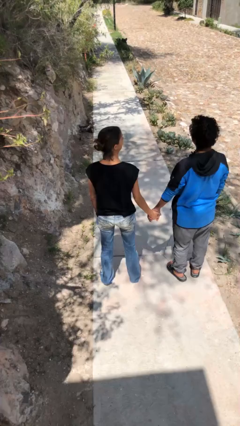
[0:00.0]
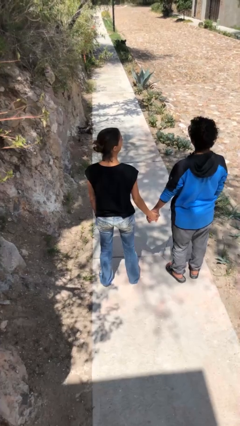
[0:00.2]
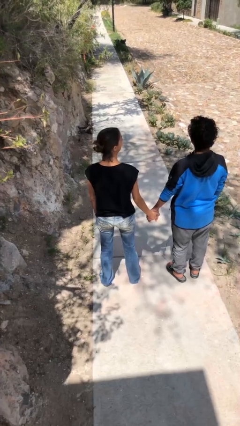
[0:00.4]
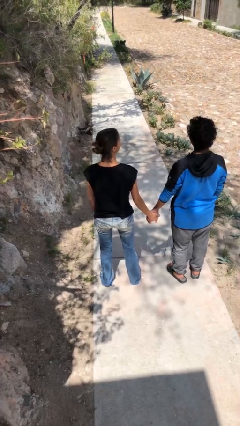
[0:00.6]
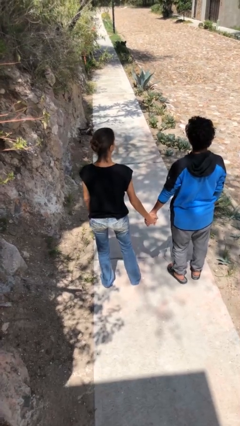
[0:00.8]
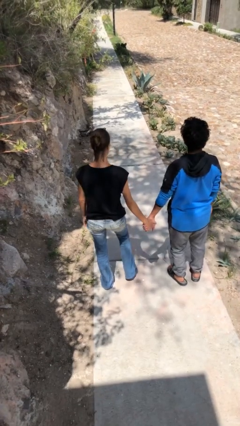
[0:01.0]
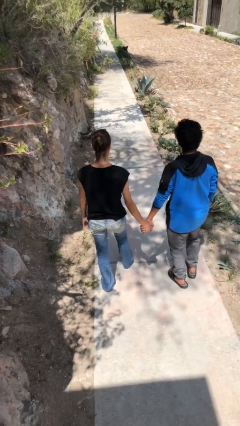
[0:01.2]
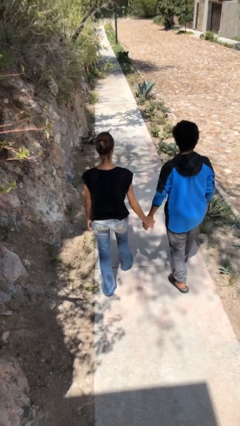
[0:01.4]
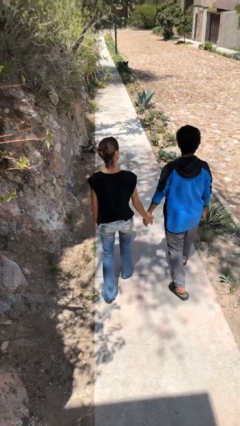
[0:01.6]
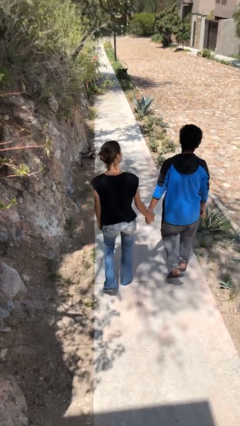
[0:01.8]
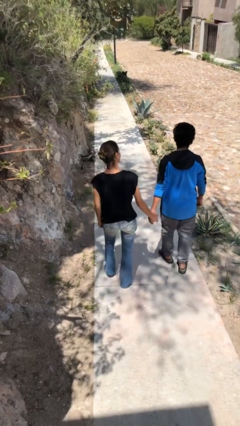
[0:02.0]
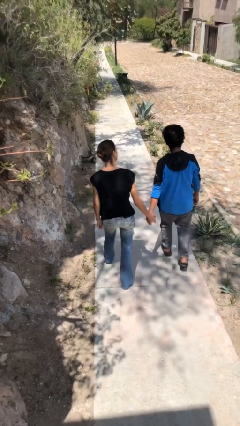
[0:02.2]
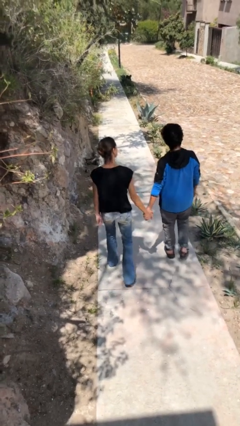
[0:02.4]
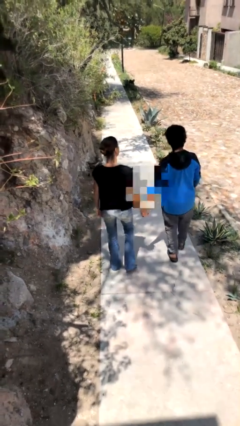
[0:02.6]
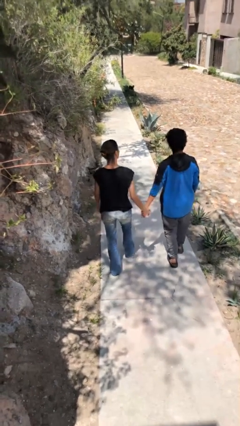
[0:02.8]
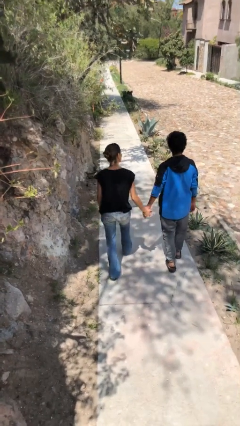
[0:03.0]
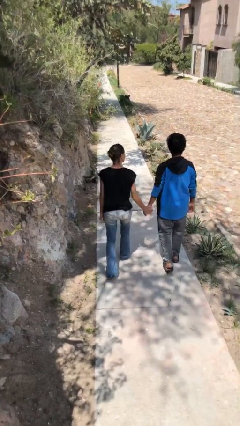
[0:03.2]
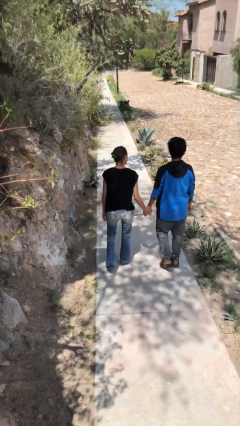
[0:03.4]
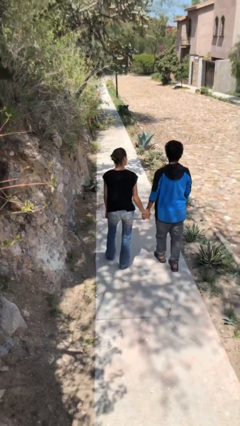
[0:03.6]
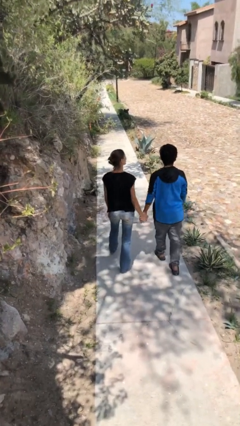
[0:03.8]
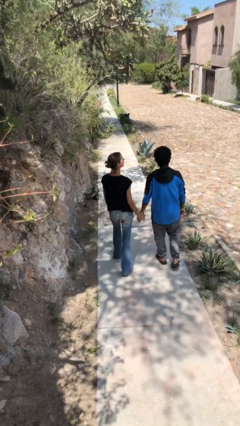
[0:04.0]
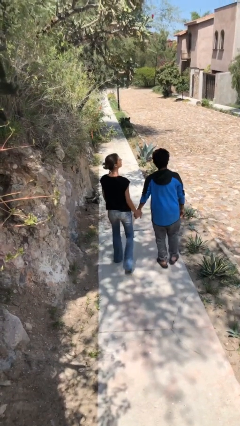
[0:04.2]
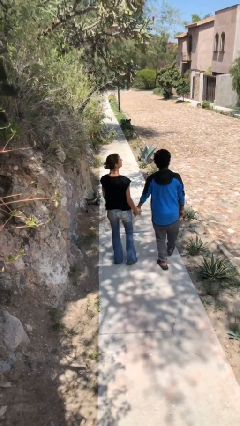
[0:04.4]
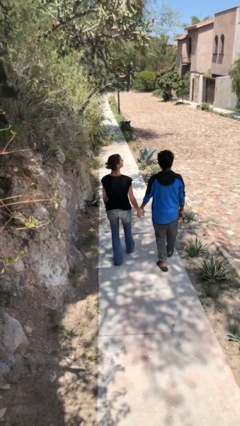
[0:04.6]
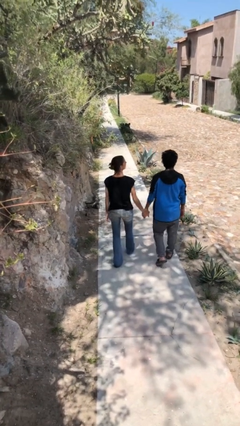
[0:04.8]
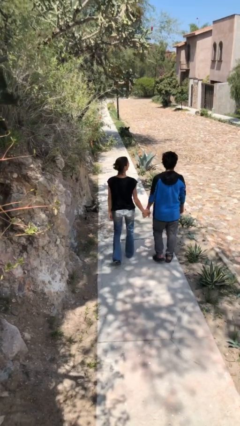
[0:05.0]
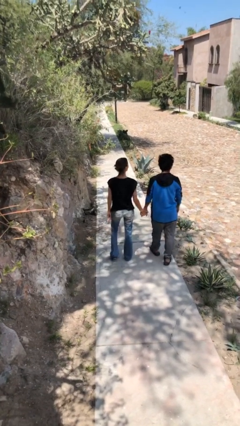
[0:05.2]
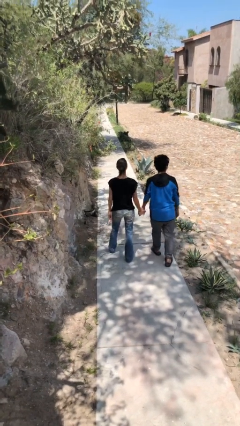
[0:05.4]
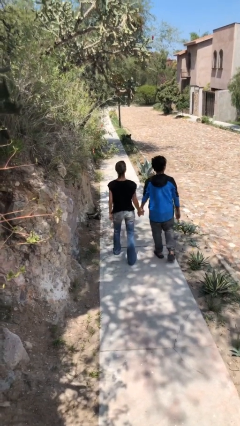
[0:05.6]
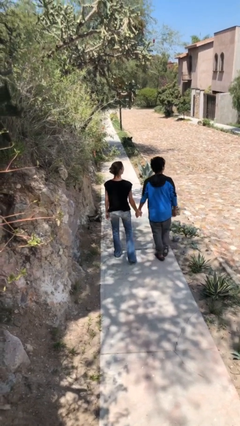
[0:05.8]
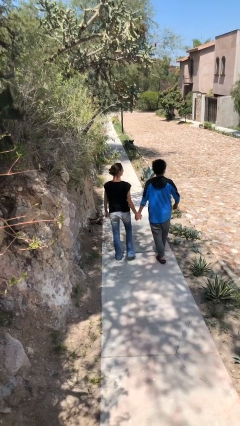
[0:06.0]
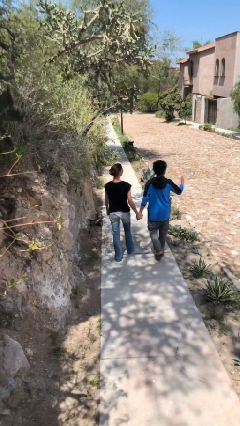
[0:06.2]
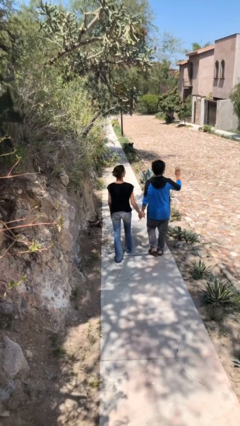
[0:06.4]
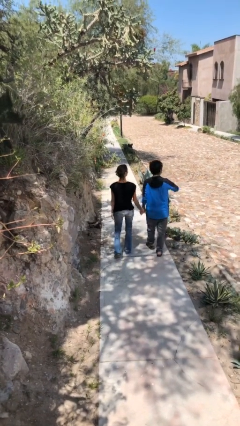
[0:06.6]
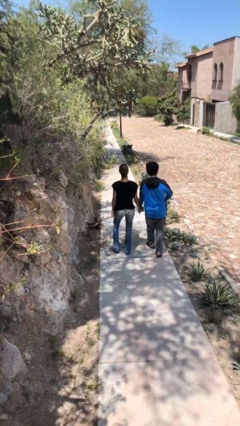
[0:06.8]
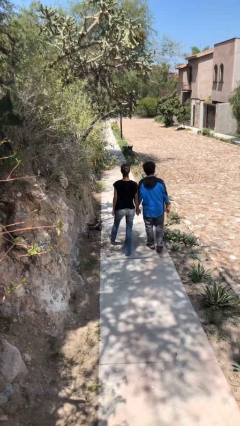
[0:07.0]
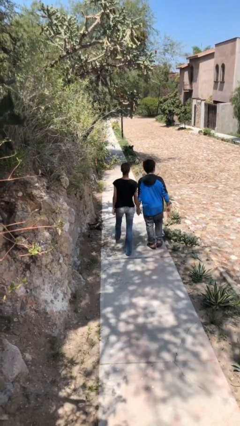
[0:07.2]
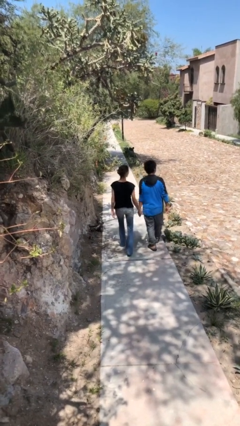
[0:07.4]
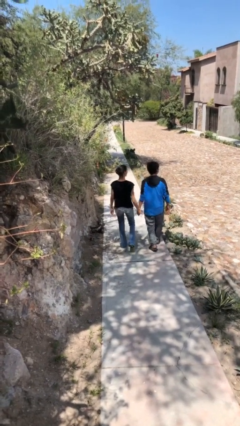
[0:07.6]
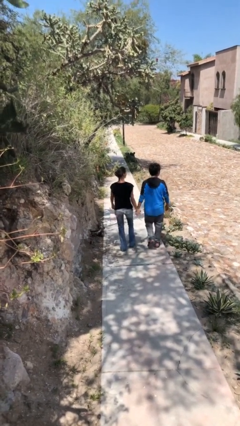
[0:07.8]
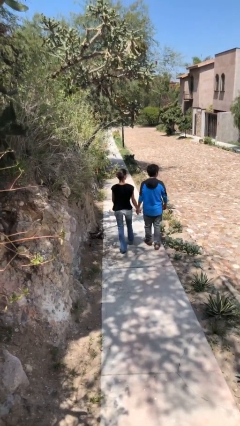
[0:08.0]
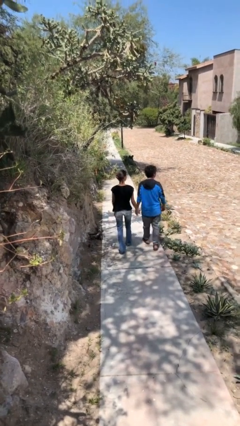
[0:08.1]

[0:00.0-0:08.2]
person holds hand

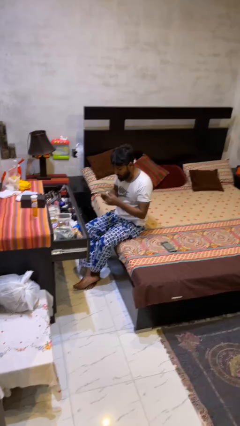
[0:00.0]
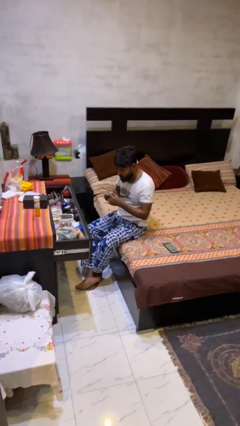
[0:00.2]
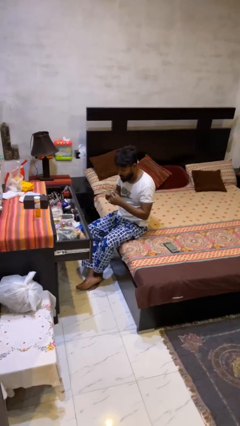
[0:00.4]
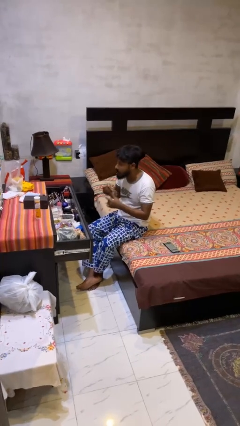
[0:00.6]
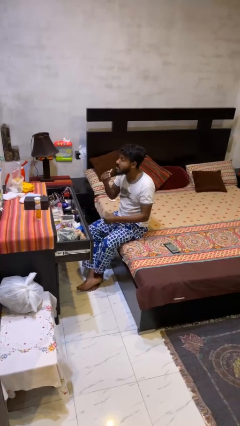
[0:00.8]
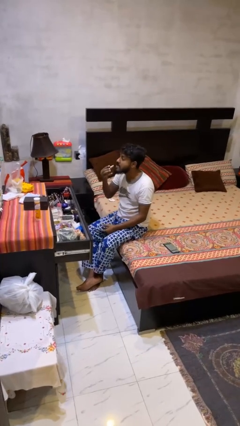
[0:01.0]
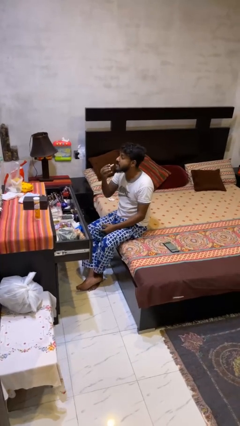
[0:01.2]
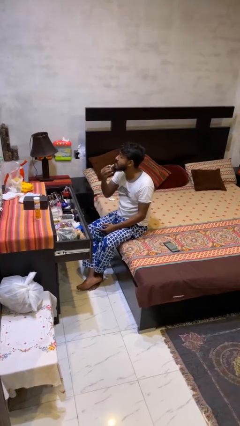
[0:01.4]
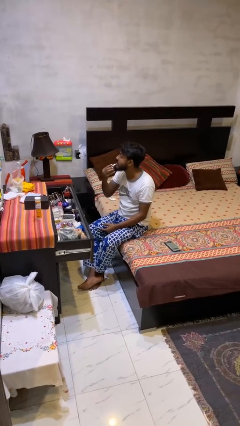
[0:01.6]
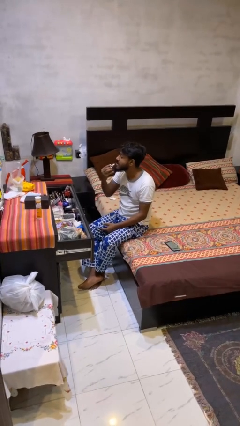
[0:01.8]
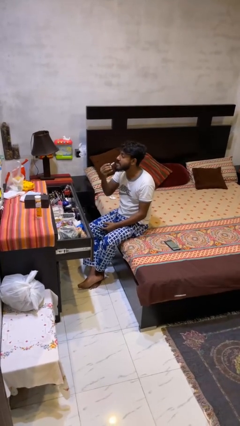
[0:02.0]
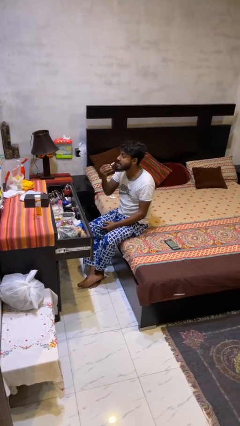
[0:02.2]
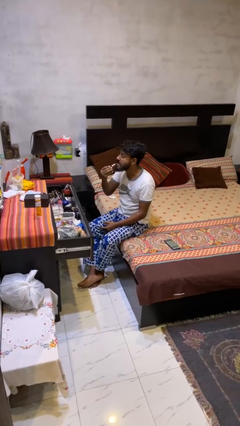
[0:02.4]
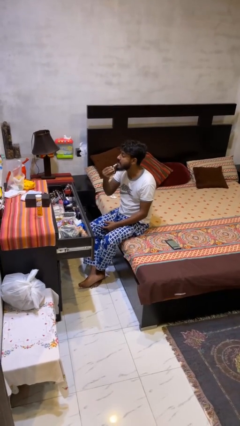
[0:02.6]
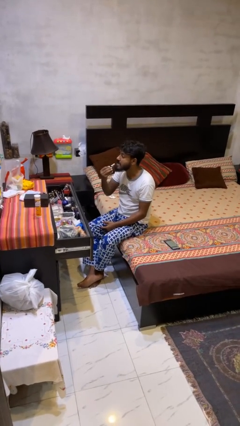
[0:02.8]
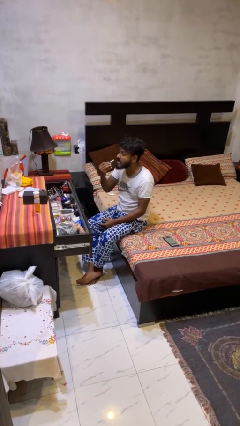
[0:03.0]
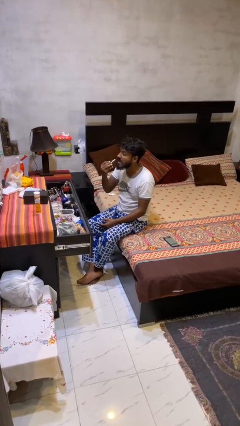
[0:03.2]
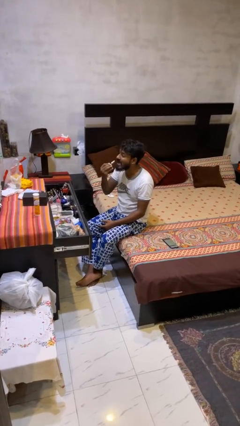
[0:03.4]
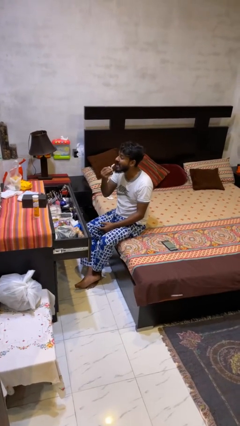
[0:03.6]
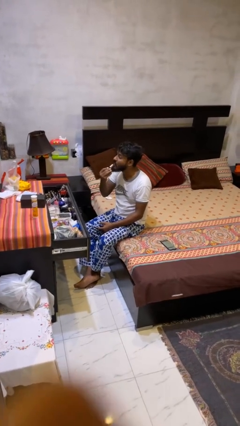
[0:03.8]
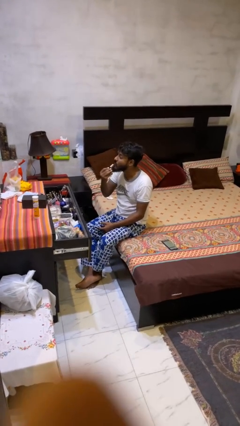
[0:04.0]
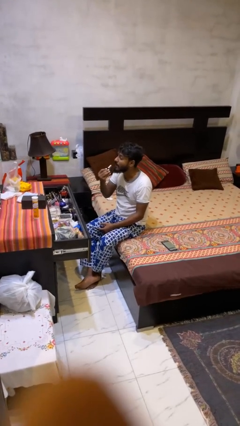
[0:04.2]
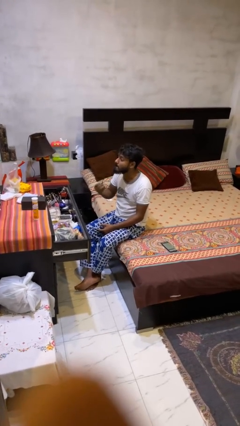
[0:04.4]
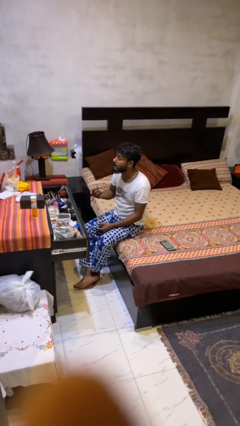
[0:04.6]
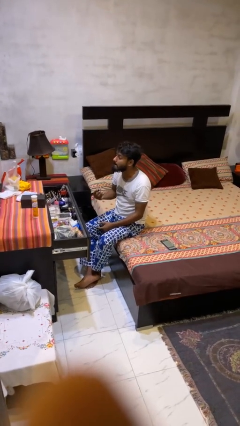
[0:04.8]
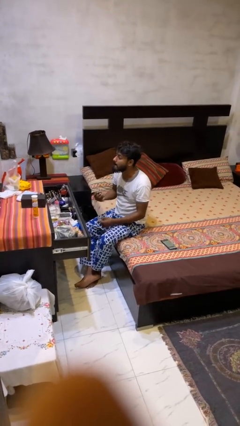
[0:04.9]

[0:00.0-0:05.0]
person applies lip makeup

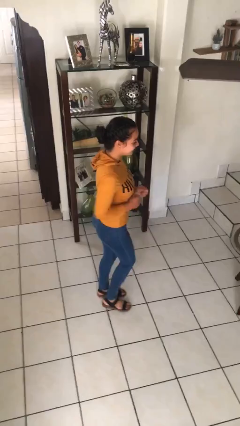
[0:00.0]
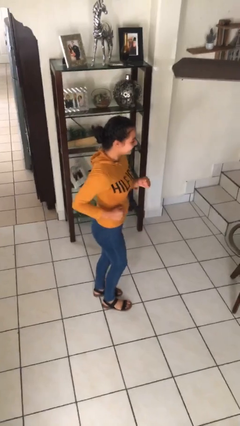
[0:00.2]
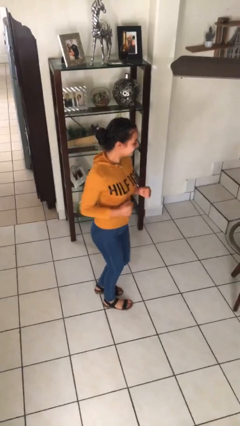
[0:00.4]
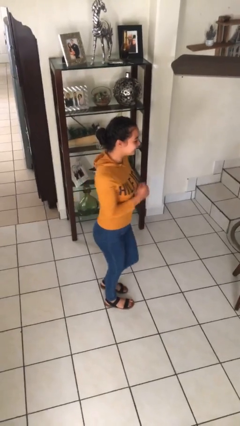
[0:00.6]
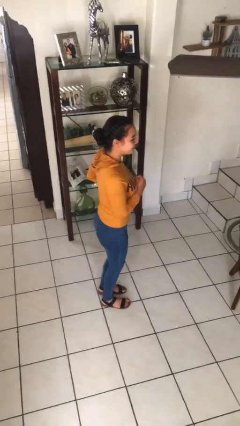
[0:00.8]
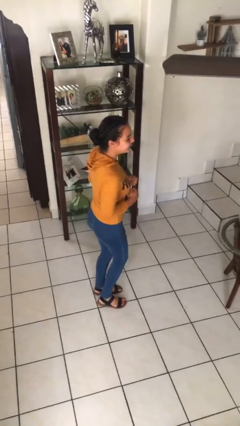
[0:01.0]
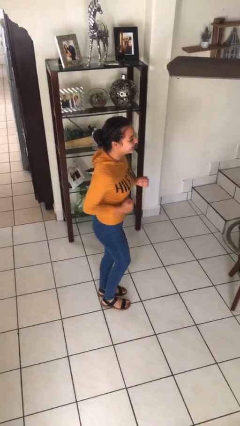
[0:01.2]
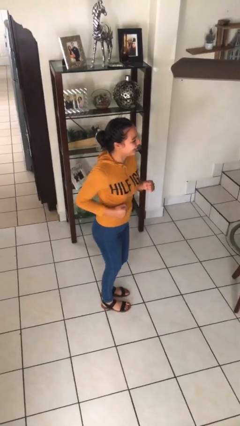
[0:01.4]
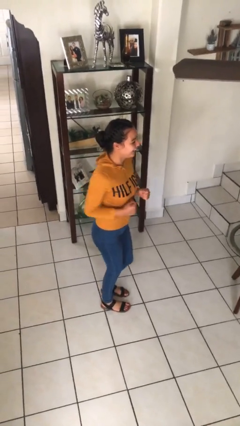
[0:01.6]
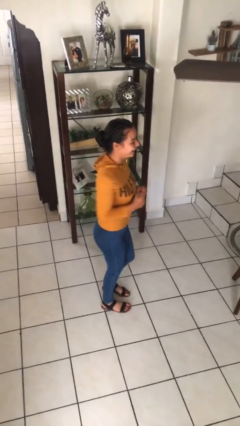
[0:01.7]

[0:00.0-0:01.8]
person dances in place

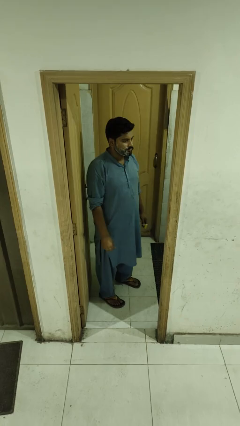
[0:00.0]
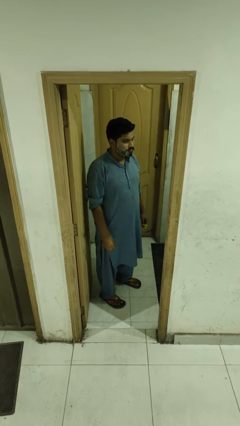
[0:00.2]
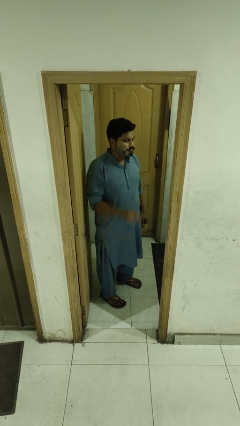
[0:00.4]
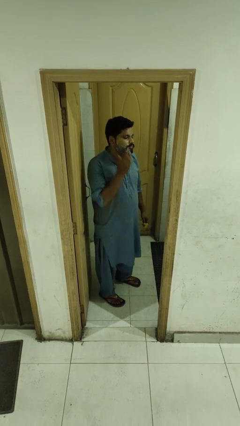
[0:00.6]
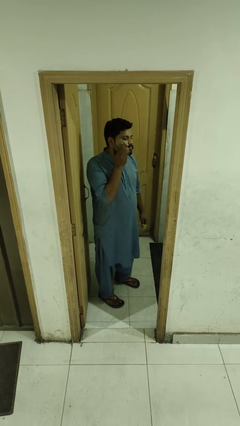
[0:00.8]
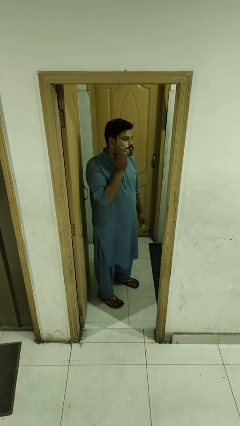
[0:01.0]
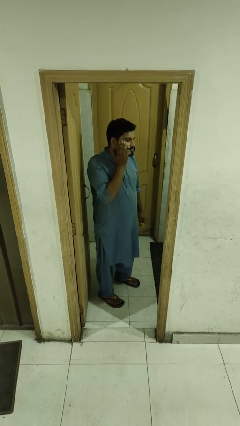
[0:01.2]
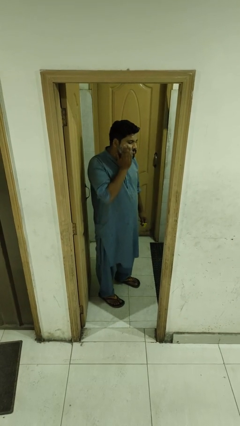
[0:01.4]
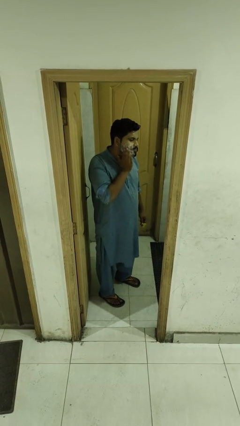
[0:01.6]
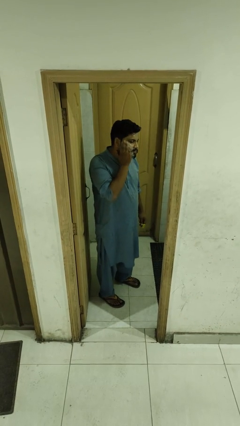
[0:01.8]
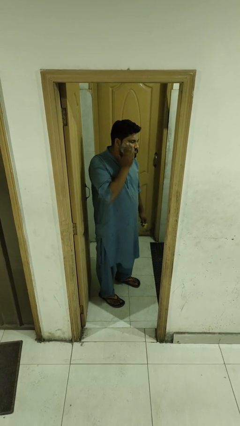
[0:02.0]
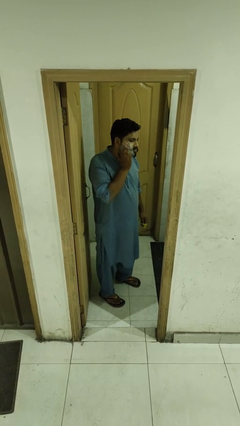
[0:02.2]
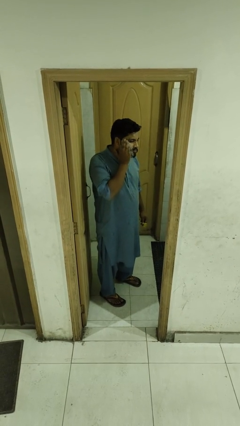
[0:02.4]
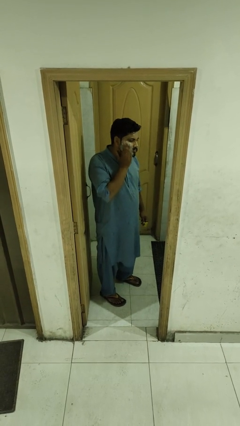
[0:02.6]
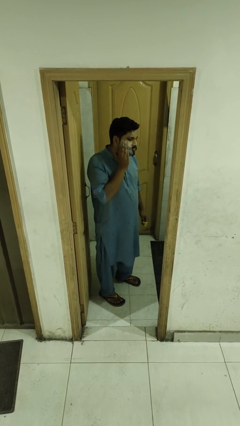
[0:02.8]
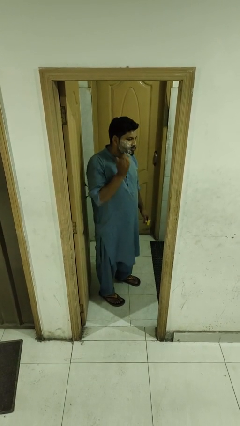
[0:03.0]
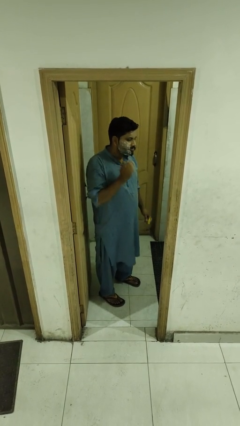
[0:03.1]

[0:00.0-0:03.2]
person applies shaving cream
